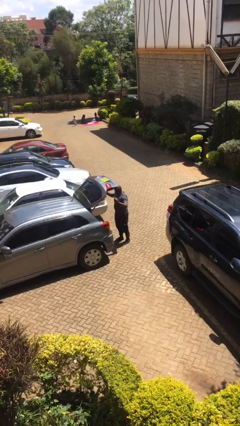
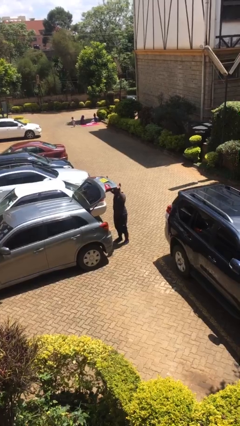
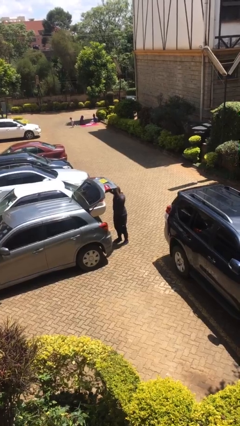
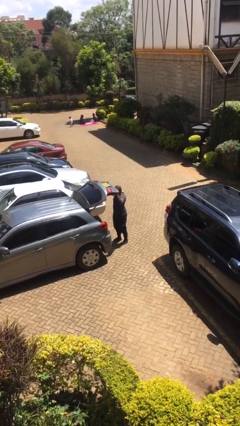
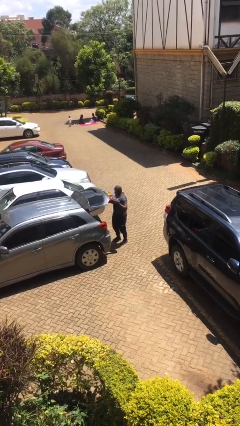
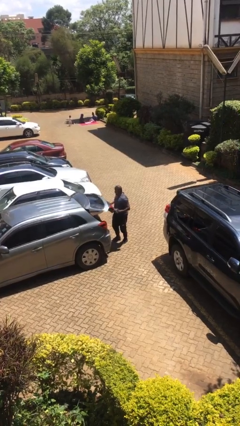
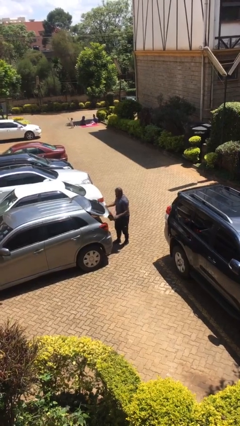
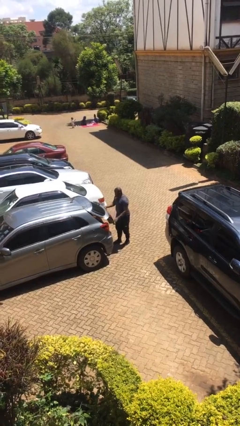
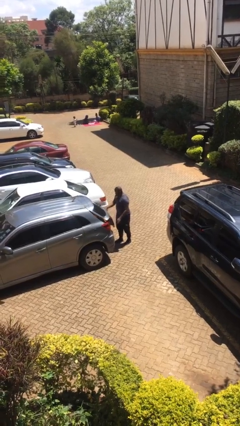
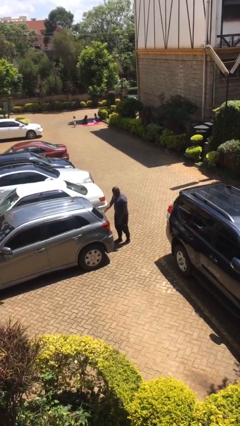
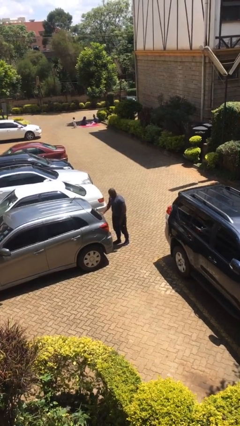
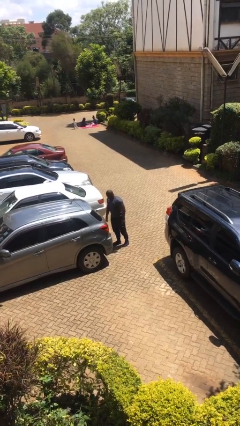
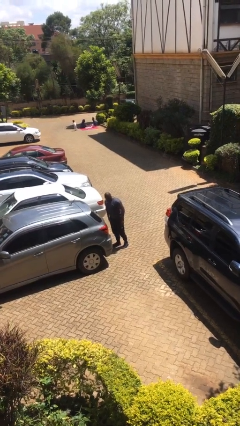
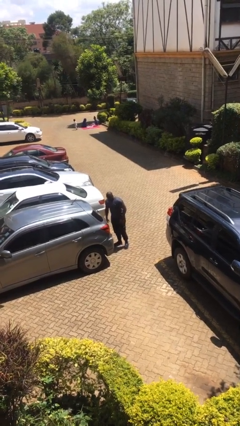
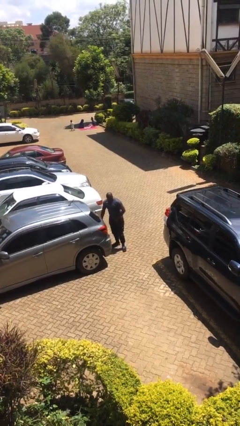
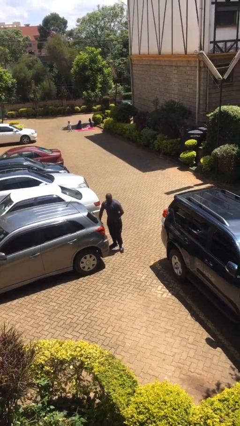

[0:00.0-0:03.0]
person closes car trunk

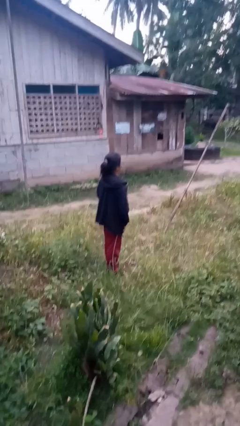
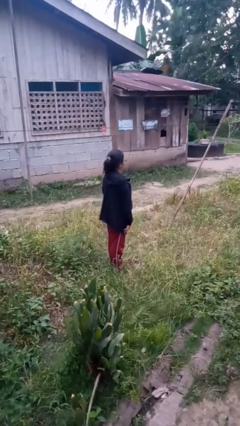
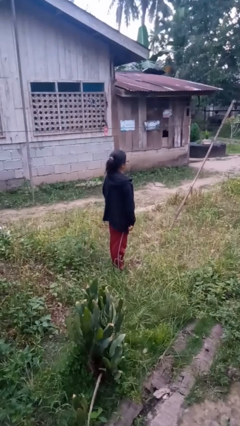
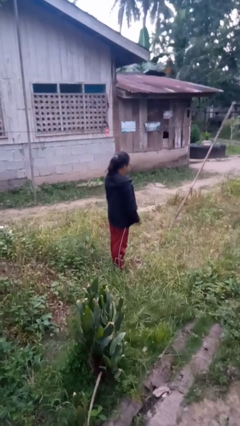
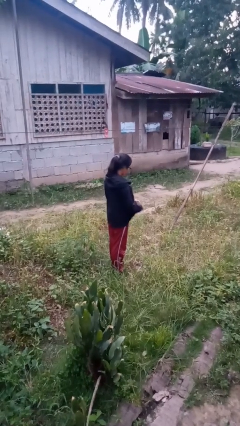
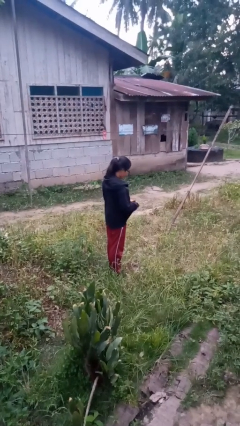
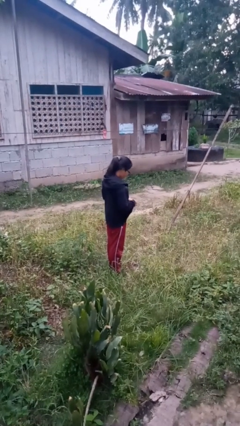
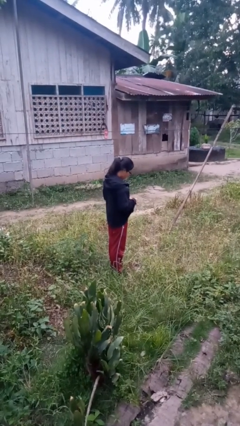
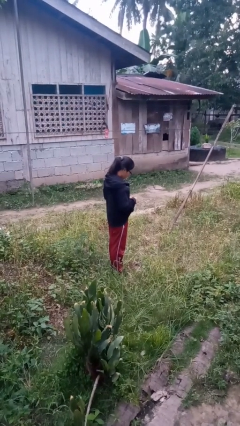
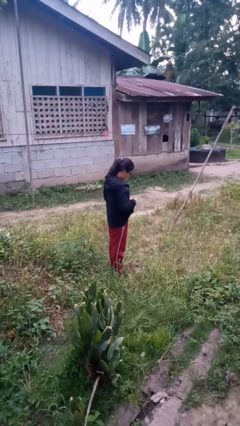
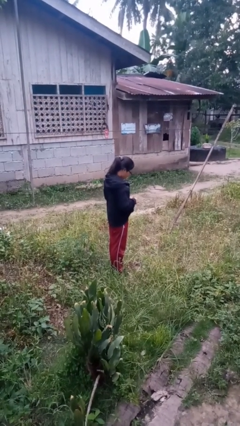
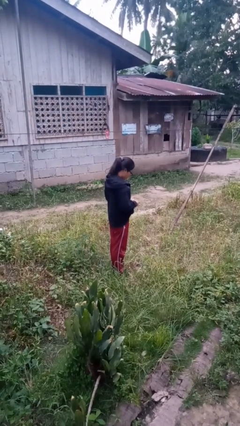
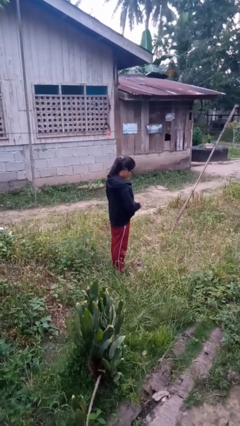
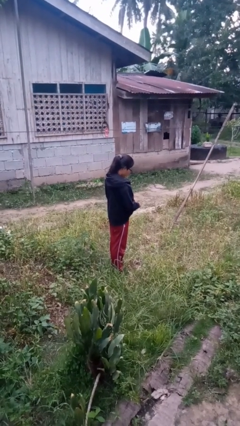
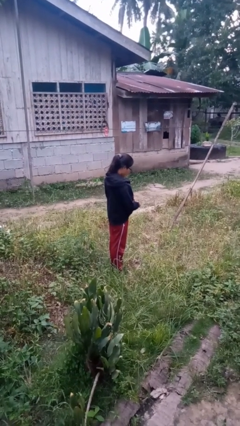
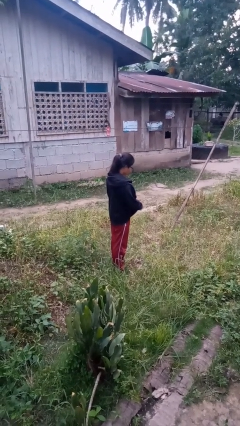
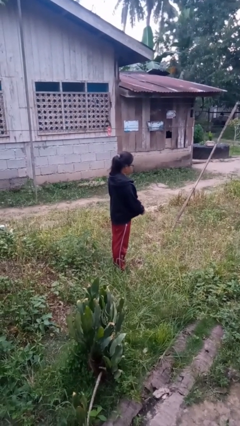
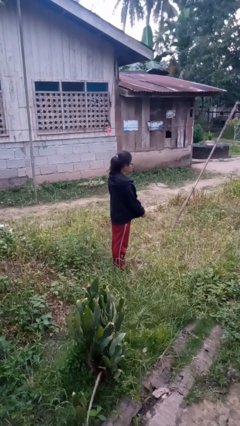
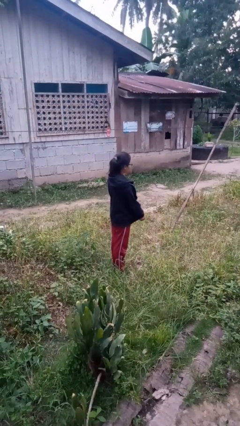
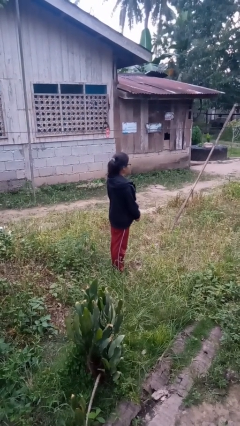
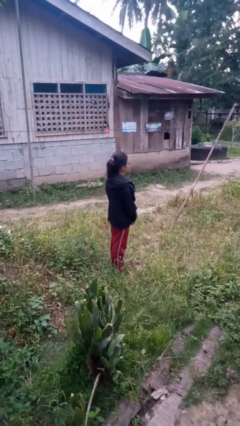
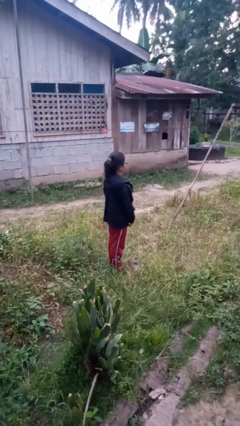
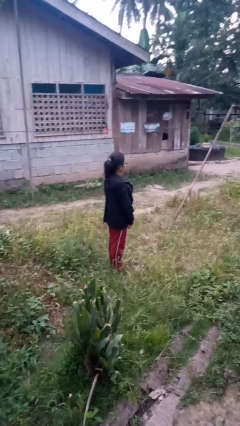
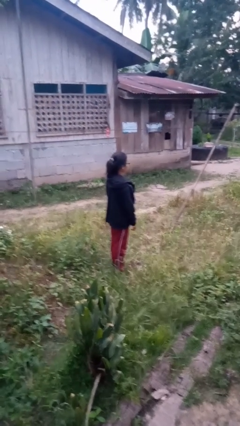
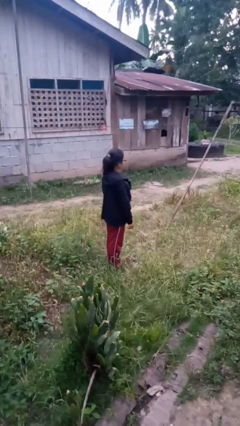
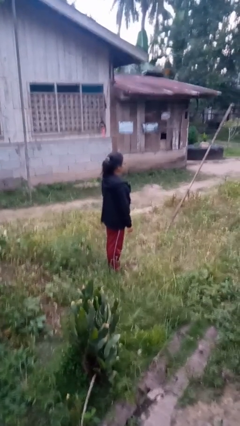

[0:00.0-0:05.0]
person zips up jacket

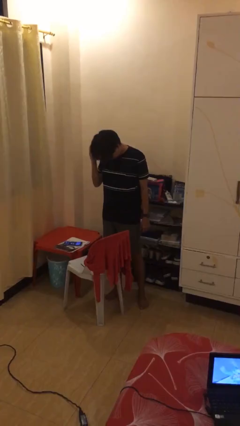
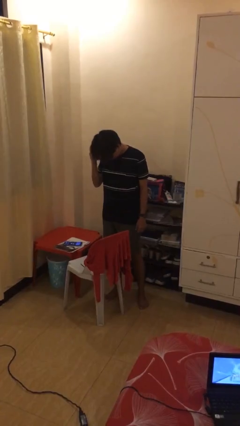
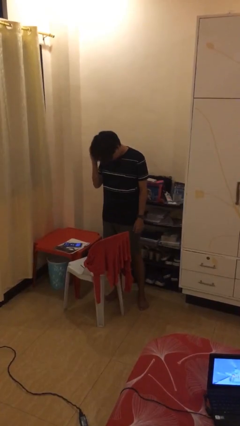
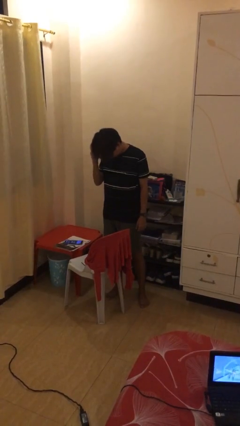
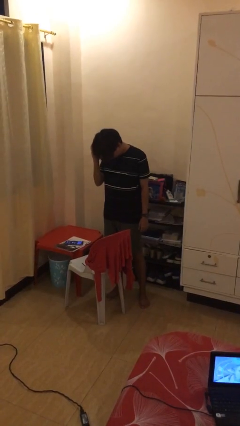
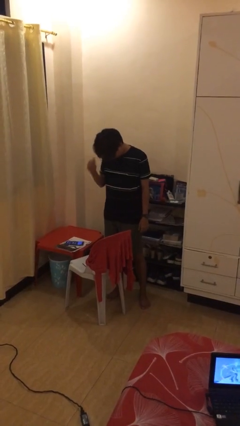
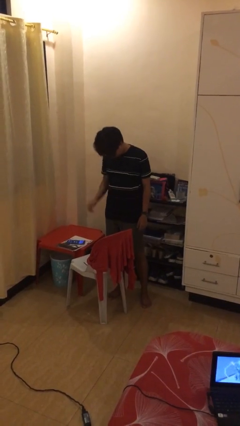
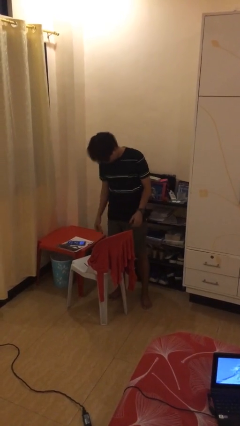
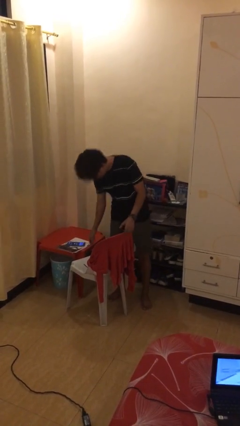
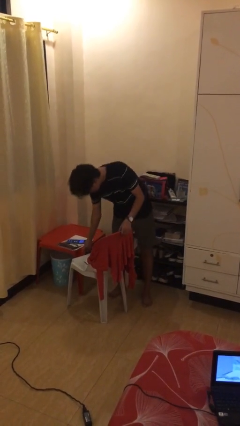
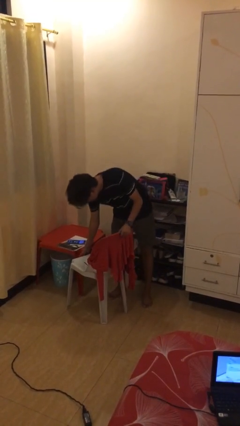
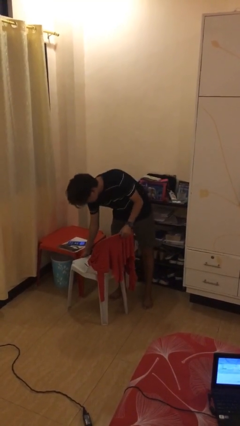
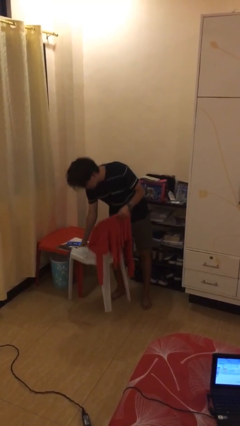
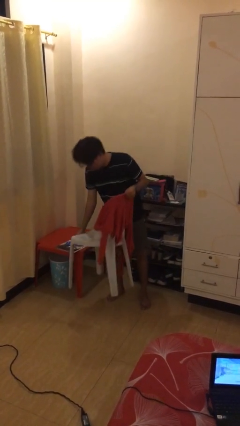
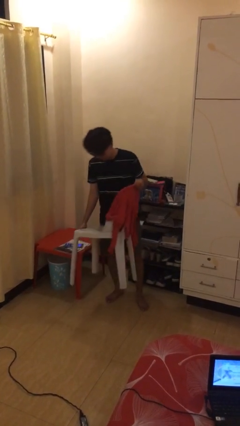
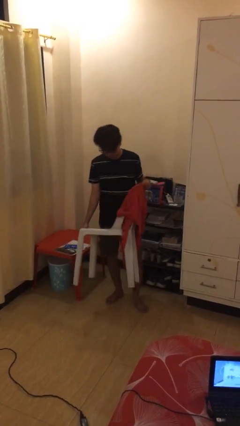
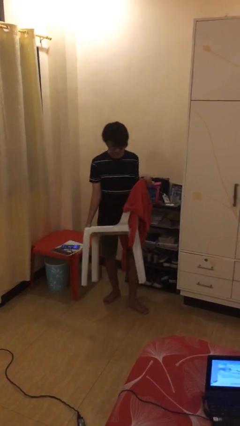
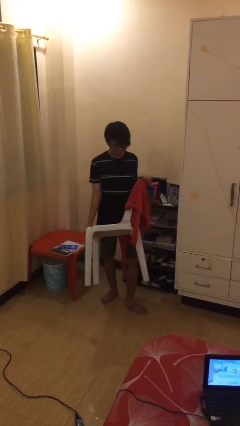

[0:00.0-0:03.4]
person picks up object from floor

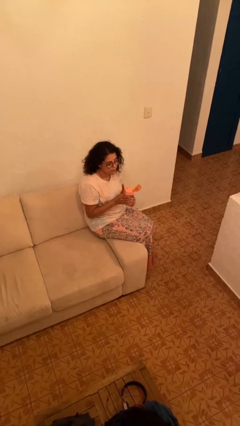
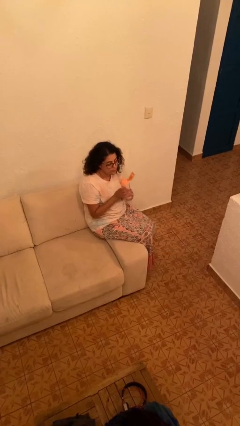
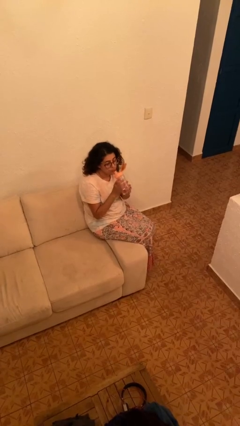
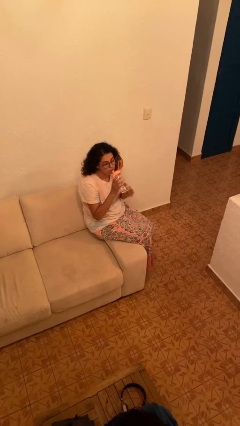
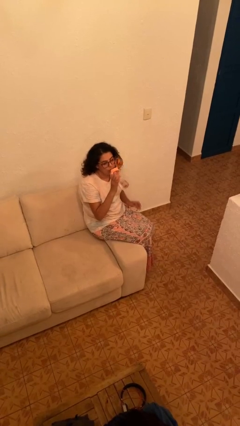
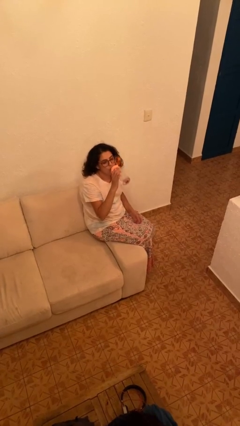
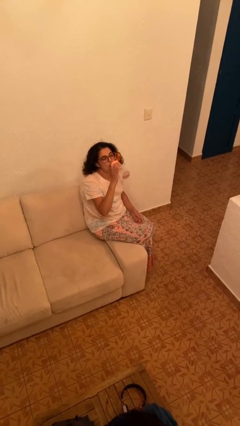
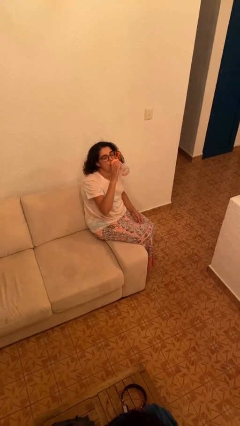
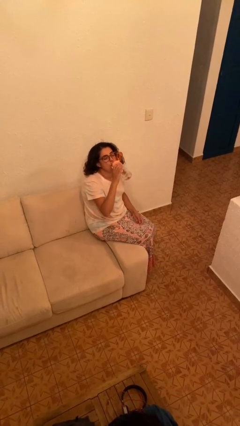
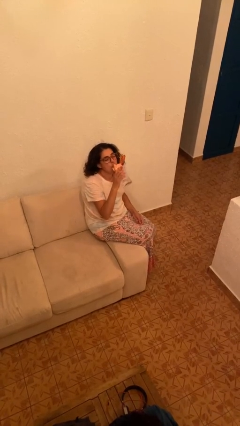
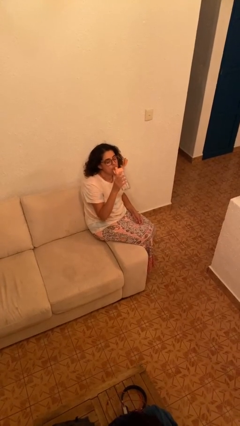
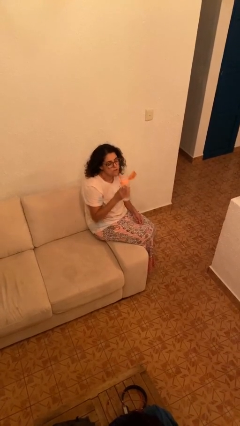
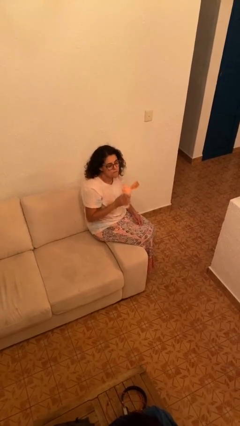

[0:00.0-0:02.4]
person drinks from bottle

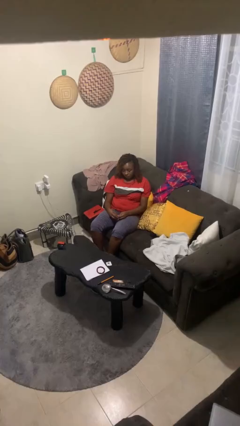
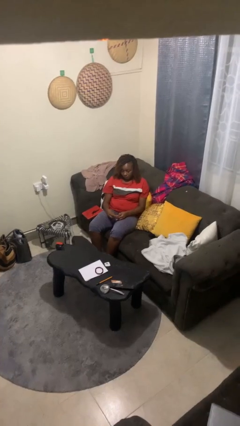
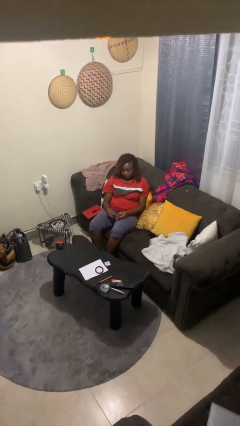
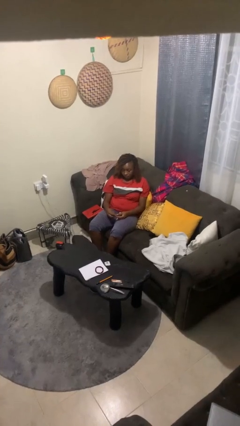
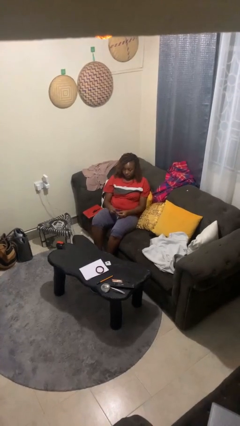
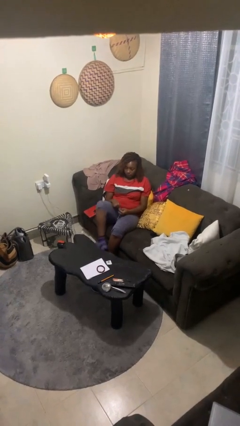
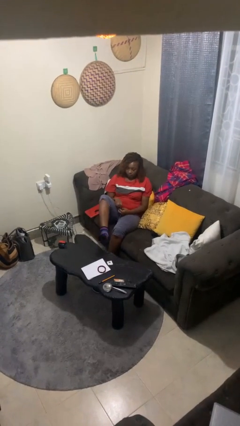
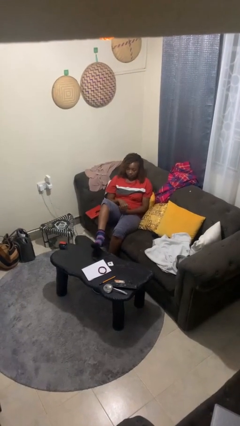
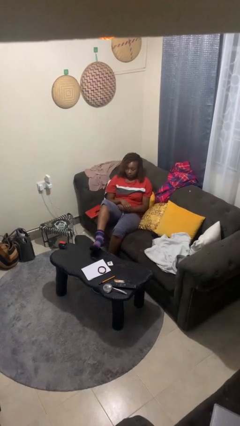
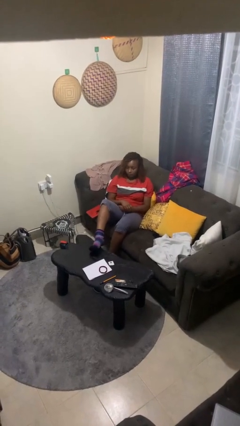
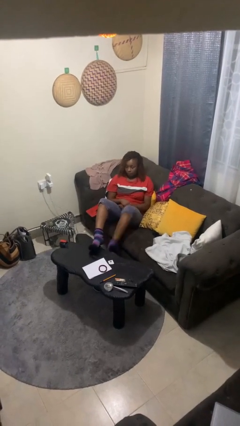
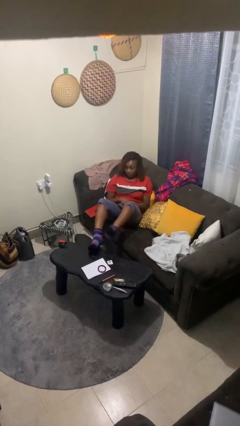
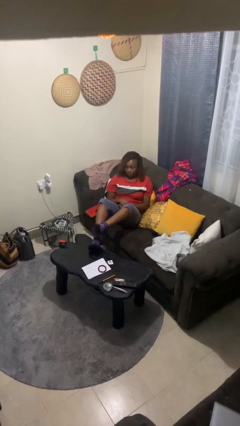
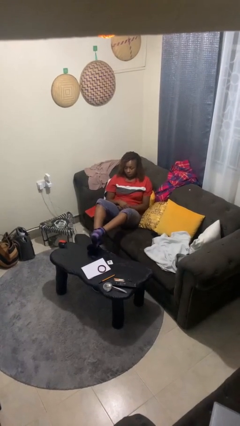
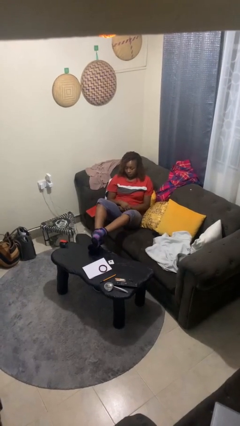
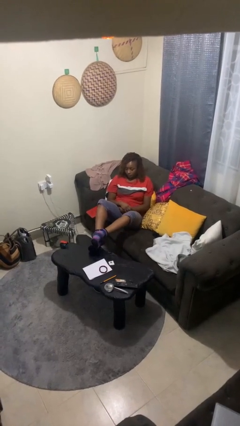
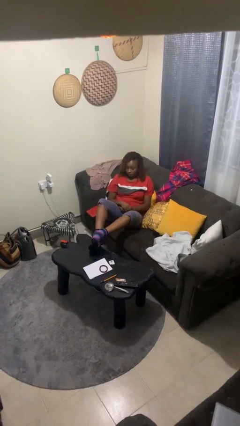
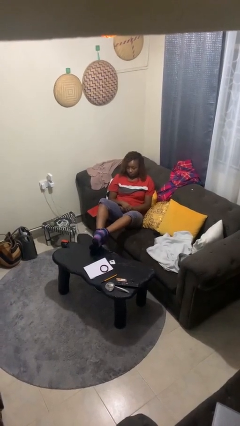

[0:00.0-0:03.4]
person puts feet up
